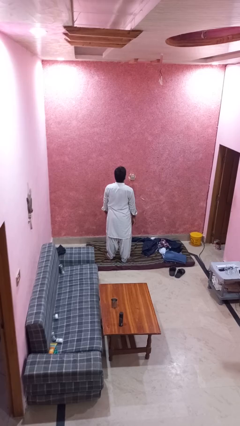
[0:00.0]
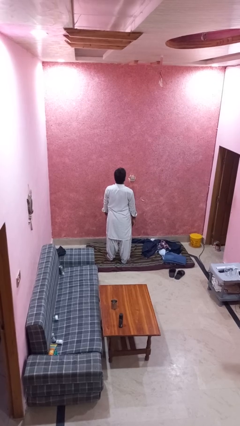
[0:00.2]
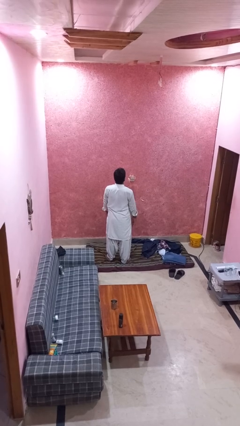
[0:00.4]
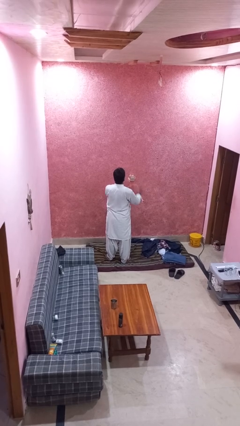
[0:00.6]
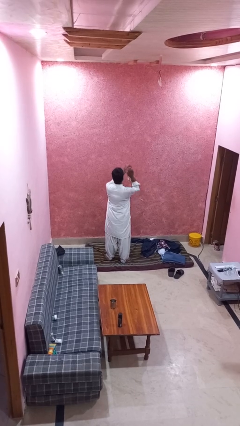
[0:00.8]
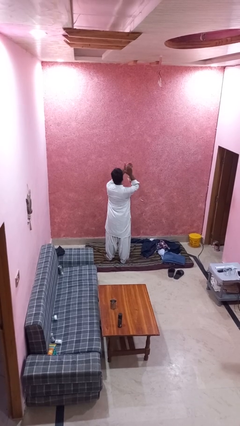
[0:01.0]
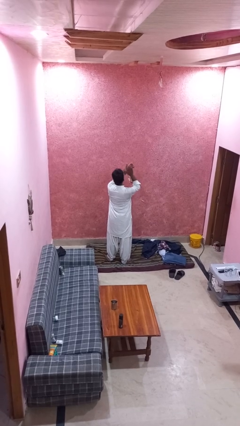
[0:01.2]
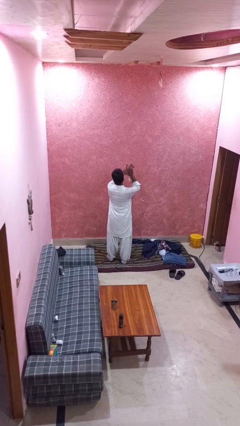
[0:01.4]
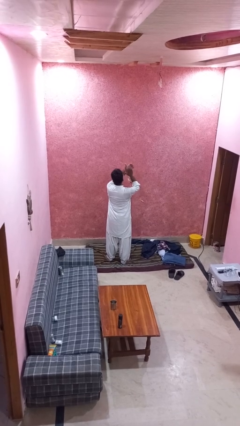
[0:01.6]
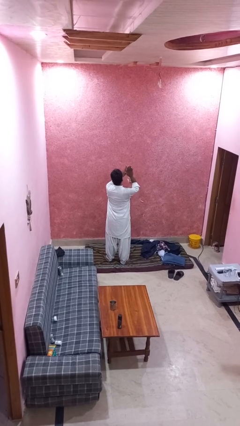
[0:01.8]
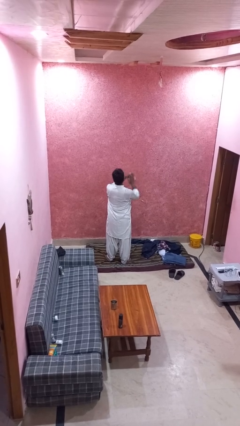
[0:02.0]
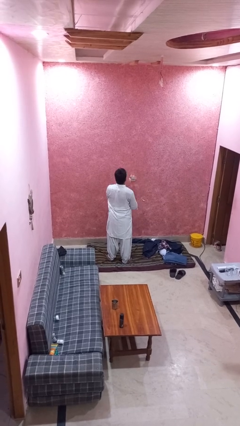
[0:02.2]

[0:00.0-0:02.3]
person claps hands

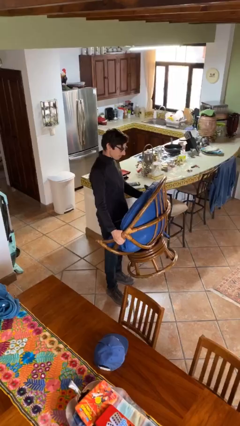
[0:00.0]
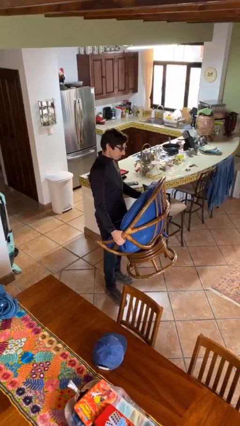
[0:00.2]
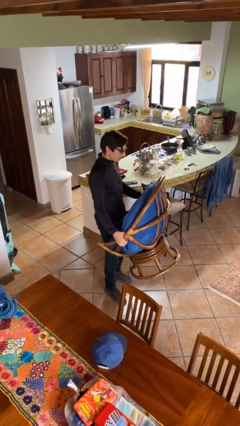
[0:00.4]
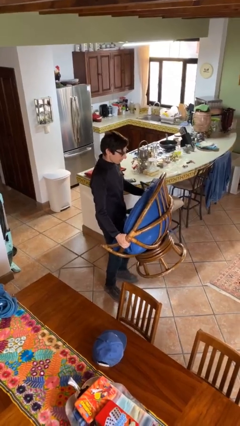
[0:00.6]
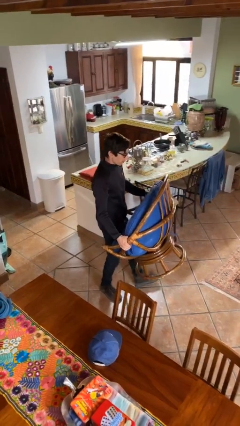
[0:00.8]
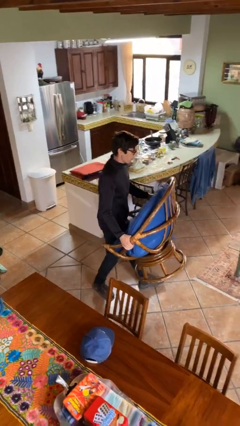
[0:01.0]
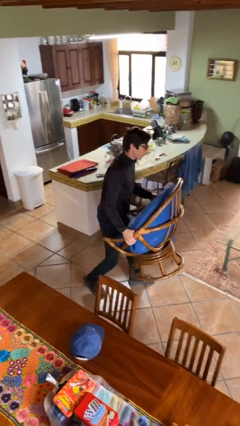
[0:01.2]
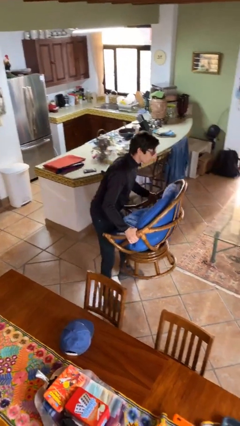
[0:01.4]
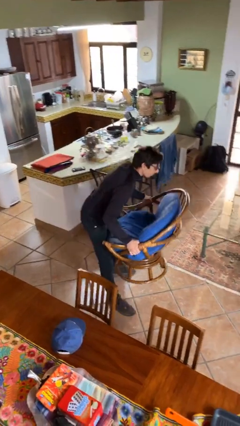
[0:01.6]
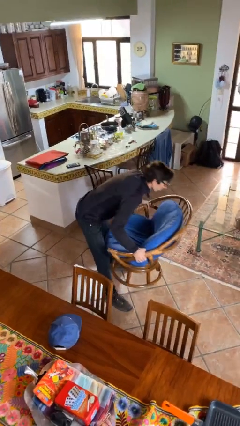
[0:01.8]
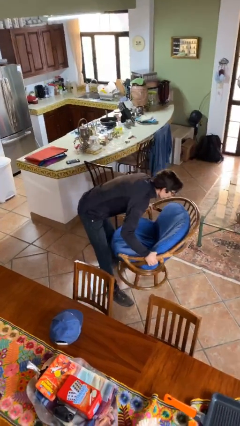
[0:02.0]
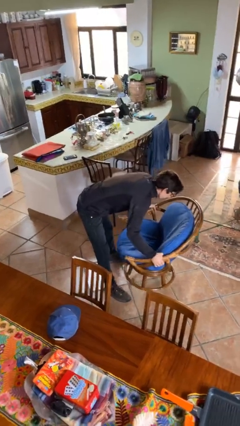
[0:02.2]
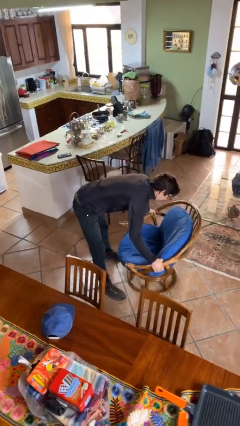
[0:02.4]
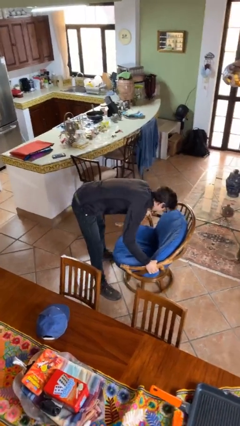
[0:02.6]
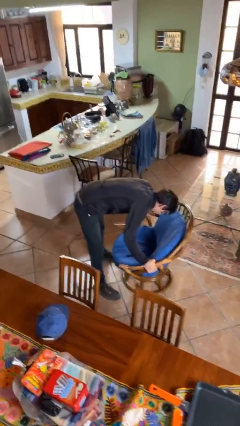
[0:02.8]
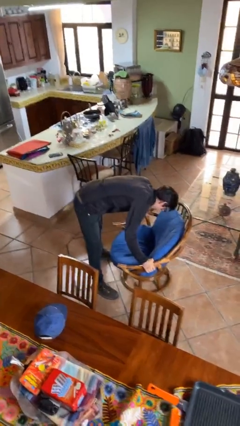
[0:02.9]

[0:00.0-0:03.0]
person carries heavy object

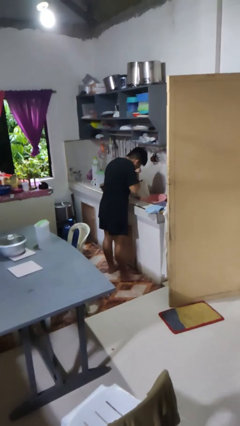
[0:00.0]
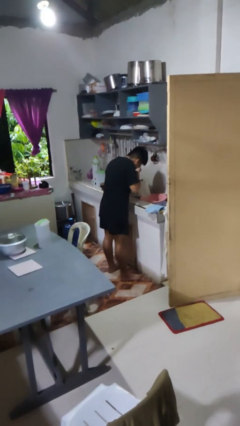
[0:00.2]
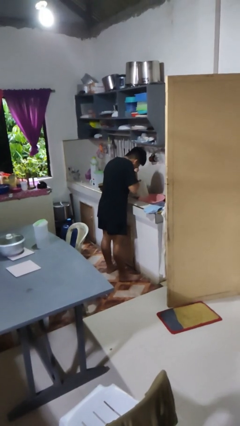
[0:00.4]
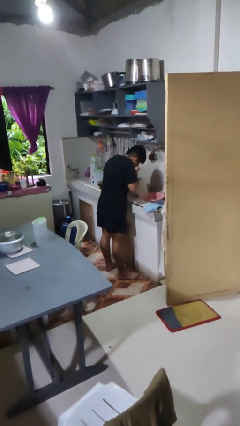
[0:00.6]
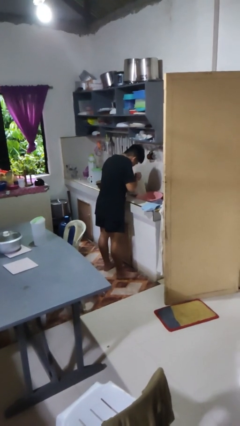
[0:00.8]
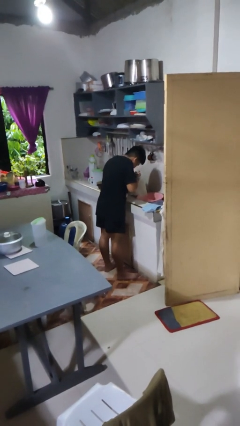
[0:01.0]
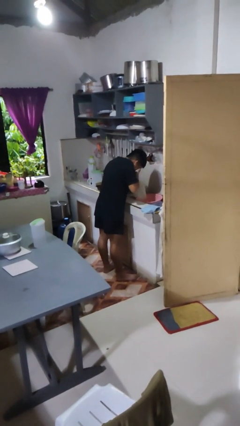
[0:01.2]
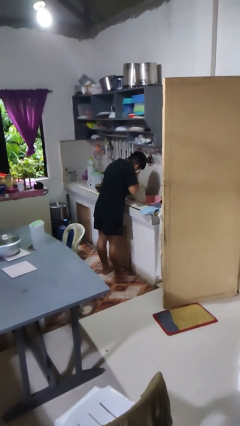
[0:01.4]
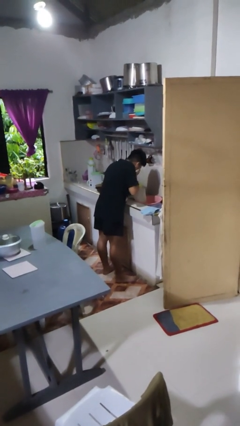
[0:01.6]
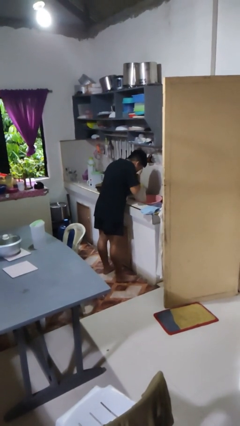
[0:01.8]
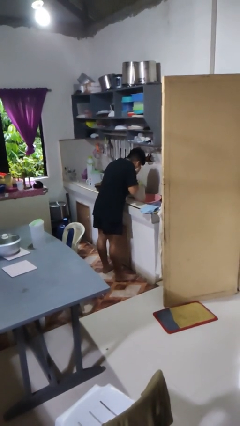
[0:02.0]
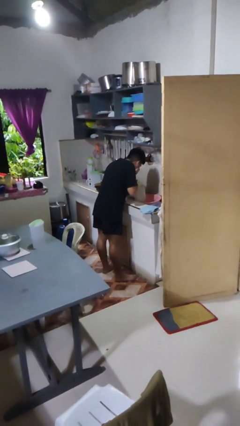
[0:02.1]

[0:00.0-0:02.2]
person washes face

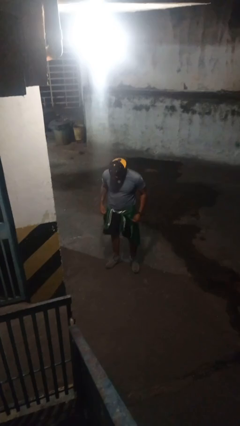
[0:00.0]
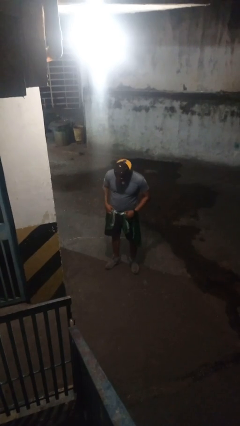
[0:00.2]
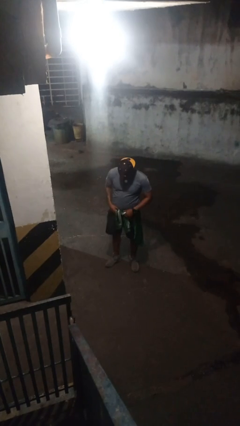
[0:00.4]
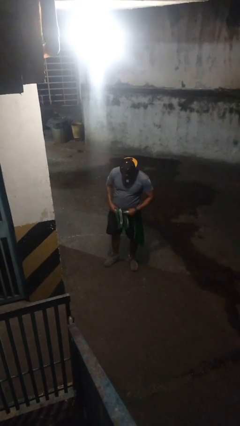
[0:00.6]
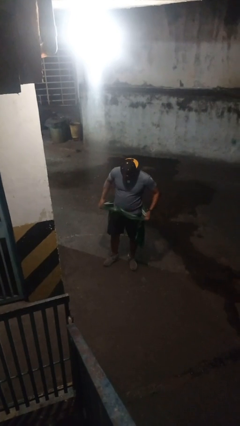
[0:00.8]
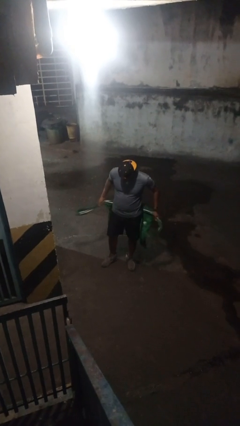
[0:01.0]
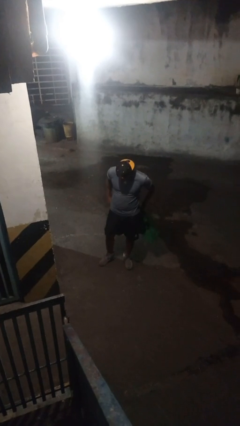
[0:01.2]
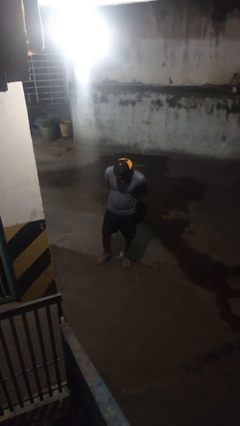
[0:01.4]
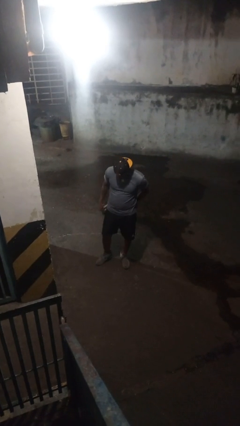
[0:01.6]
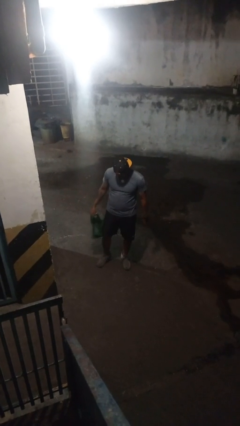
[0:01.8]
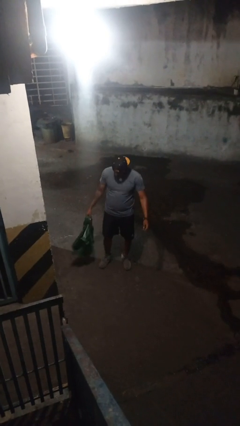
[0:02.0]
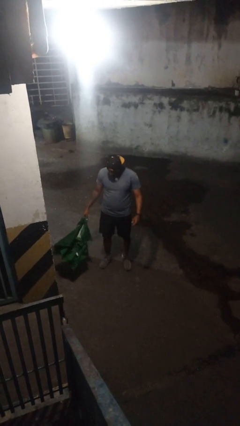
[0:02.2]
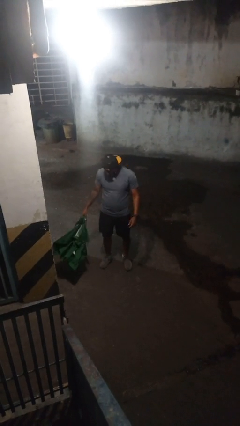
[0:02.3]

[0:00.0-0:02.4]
person unties jacket around waist

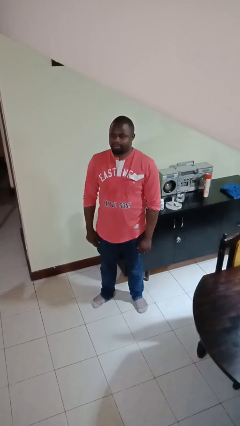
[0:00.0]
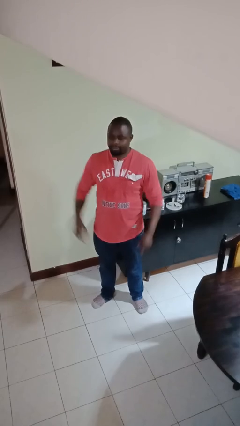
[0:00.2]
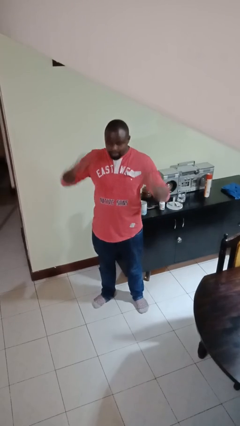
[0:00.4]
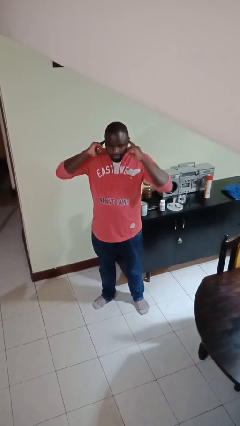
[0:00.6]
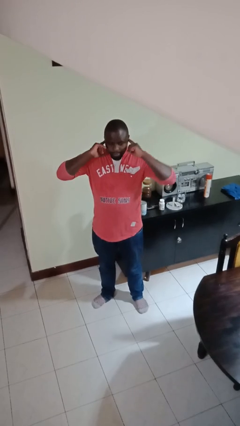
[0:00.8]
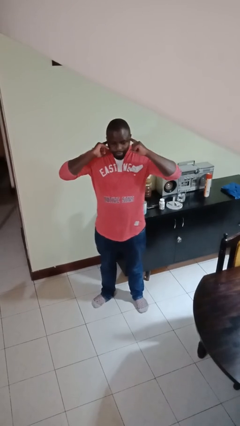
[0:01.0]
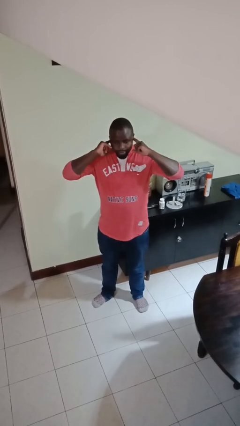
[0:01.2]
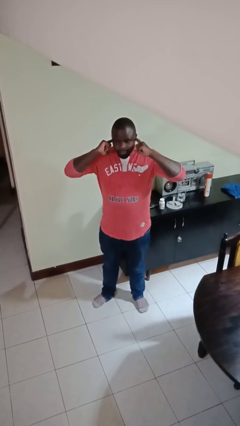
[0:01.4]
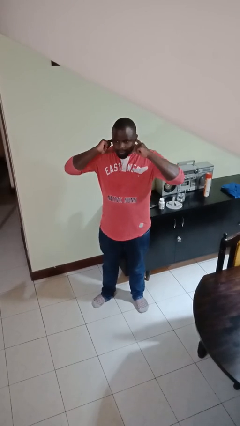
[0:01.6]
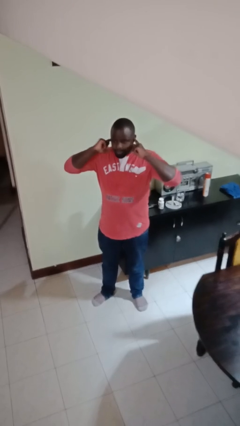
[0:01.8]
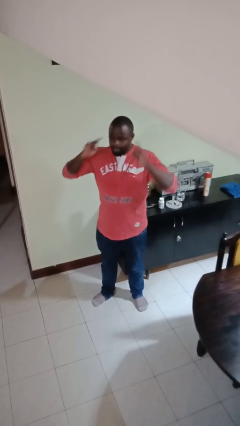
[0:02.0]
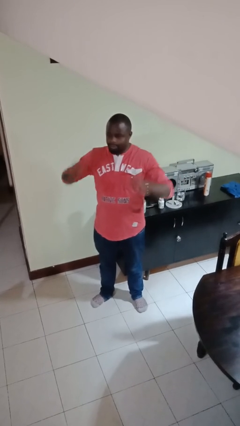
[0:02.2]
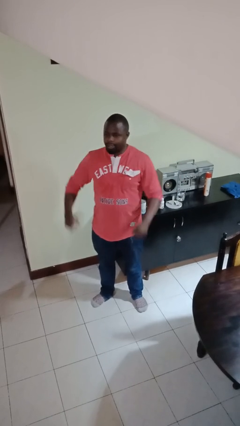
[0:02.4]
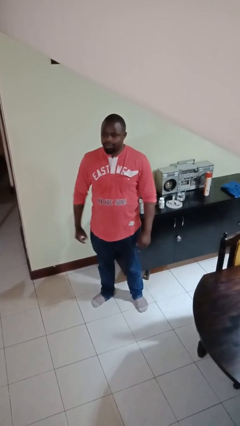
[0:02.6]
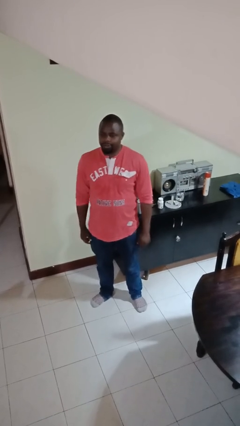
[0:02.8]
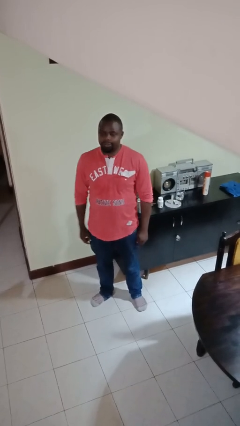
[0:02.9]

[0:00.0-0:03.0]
person puts fingers in ear

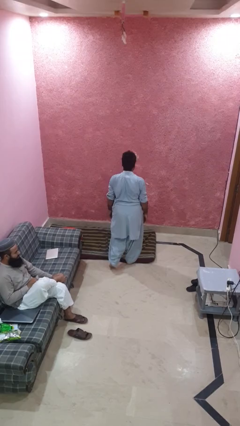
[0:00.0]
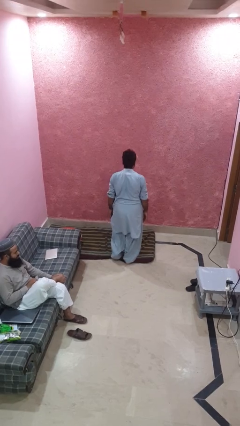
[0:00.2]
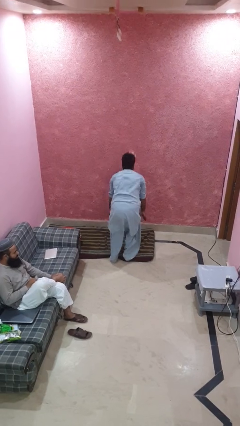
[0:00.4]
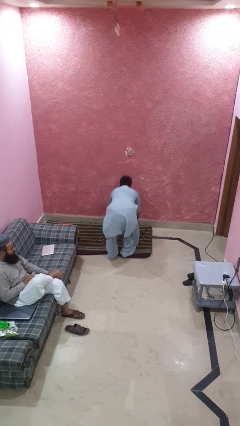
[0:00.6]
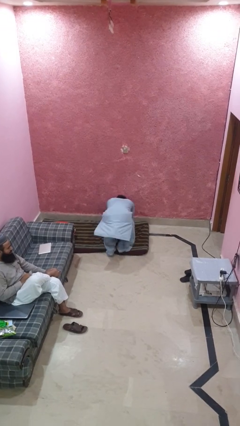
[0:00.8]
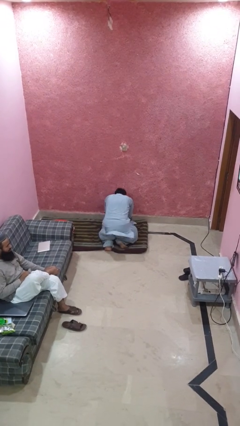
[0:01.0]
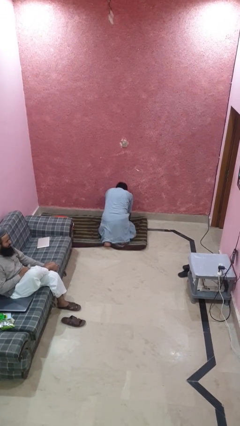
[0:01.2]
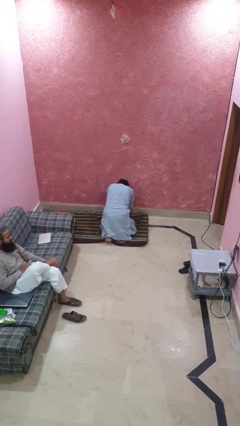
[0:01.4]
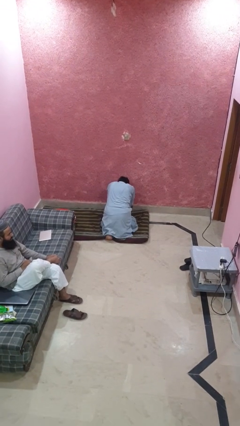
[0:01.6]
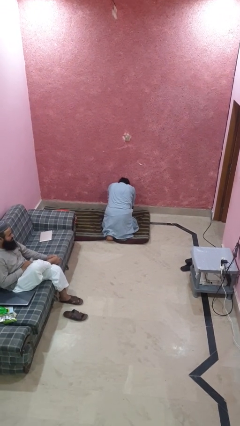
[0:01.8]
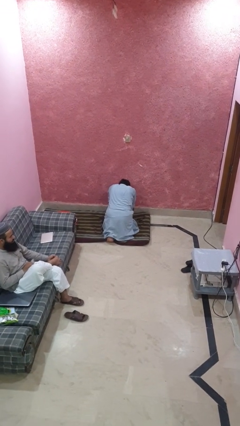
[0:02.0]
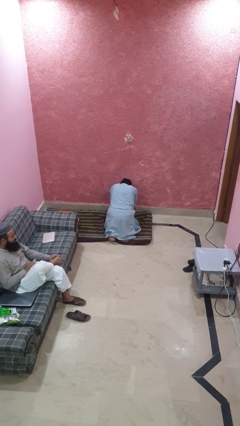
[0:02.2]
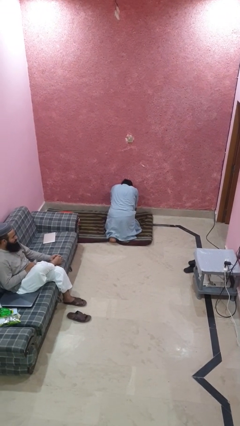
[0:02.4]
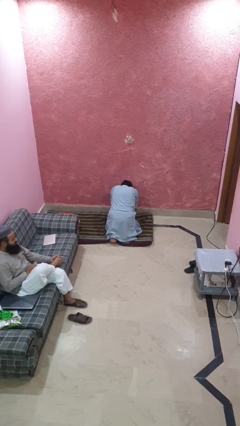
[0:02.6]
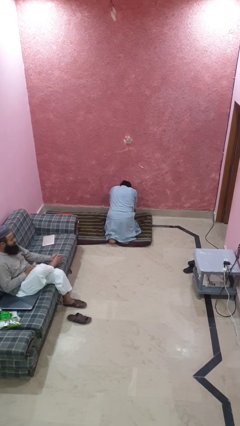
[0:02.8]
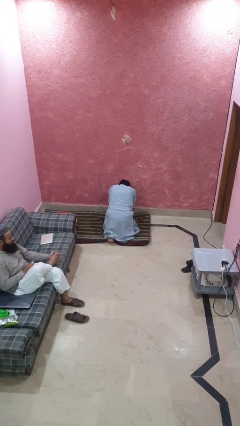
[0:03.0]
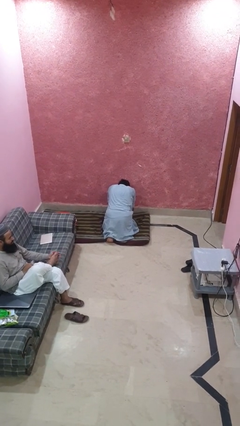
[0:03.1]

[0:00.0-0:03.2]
person trips on object on floor

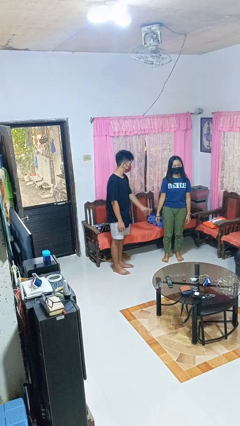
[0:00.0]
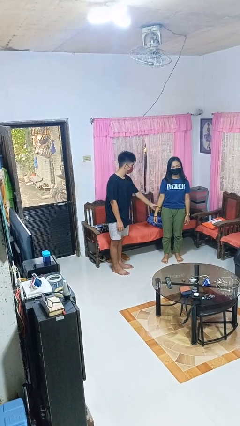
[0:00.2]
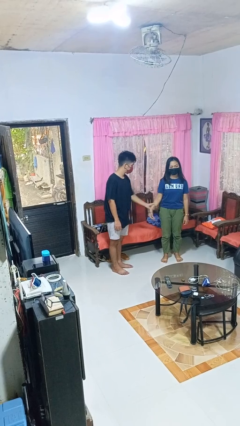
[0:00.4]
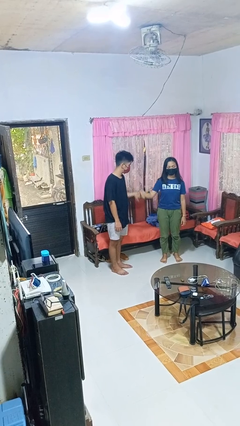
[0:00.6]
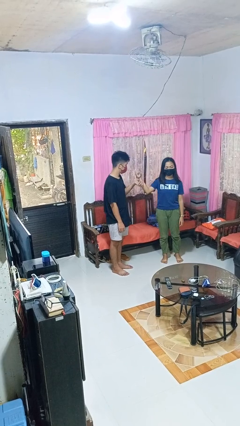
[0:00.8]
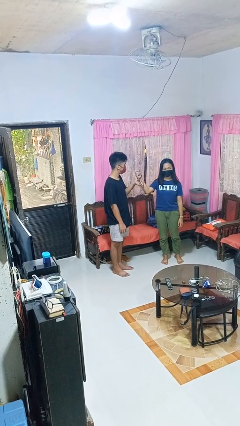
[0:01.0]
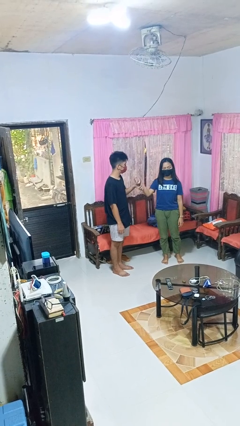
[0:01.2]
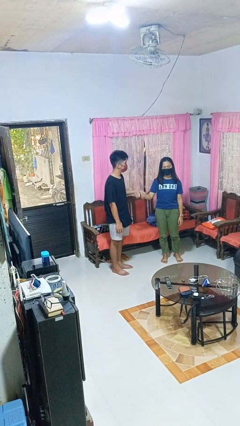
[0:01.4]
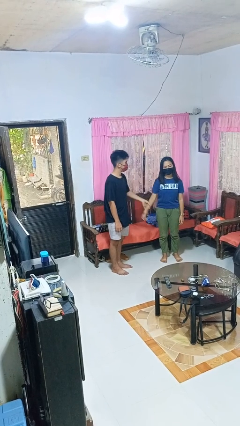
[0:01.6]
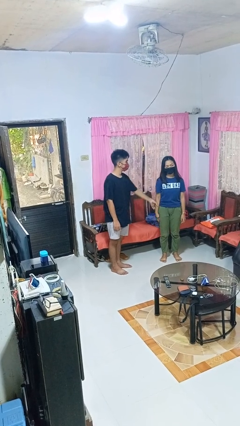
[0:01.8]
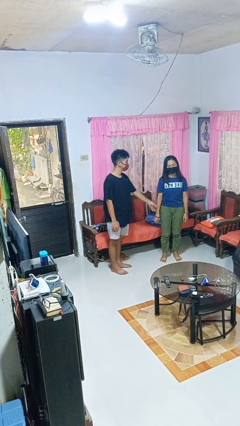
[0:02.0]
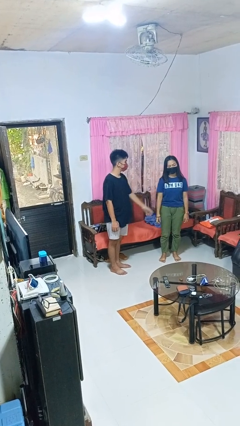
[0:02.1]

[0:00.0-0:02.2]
person grabs person by forearm
